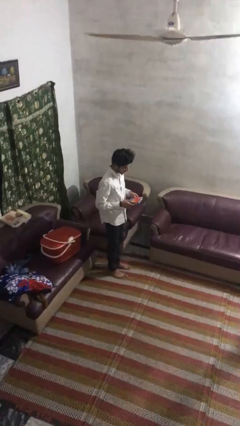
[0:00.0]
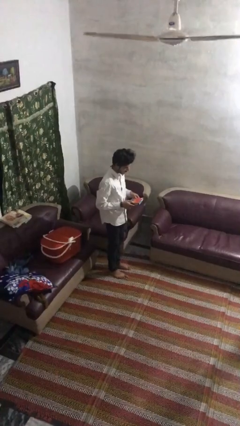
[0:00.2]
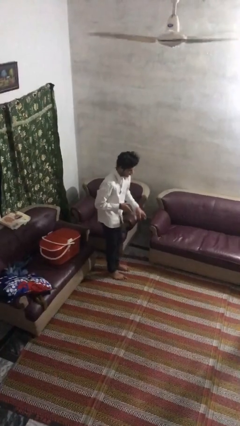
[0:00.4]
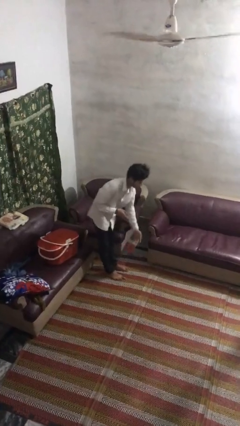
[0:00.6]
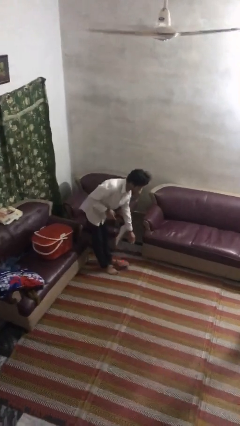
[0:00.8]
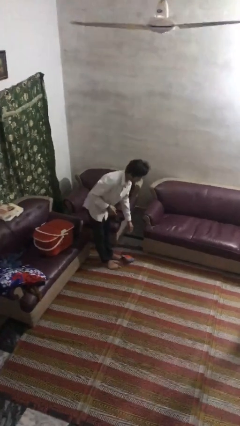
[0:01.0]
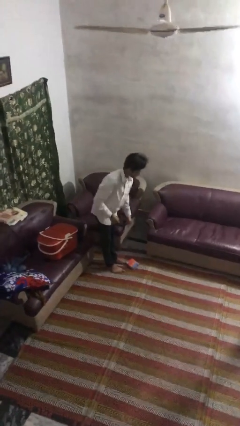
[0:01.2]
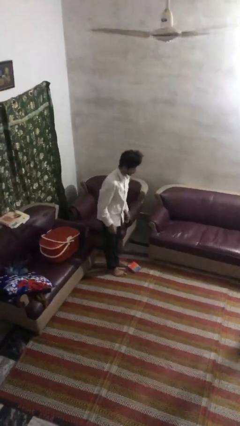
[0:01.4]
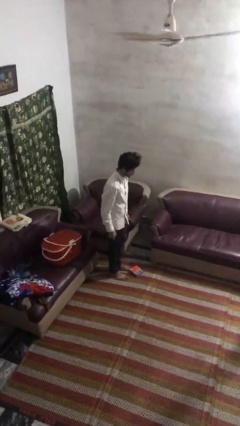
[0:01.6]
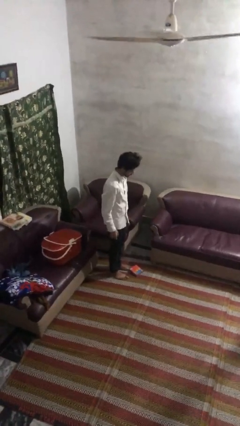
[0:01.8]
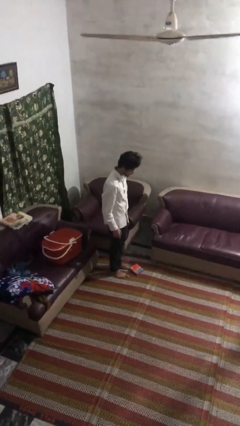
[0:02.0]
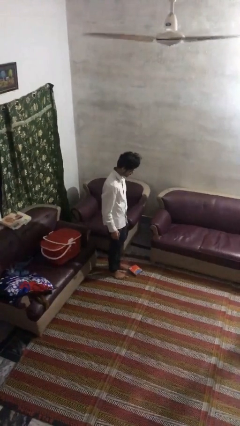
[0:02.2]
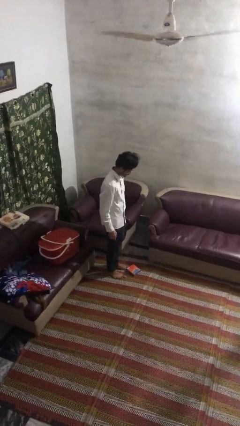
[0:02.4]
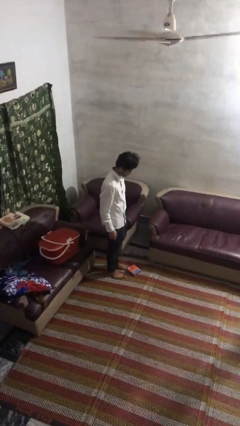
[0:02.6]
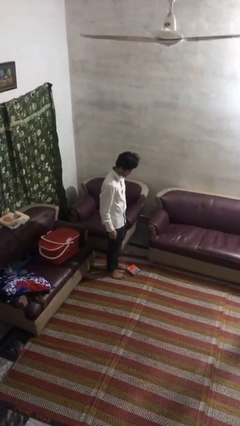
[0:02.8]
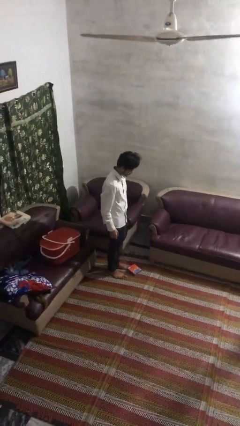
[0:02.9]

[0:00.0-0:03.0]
person drops object

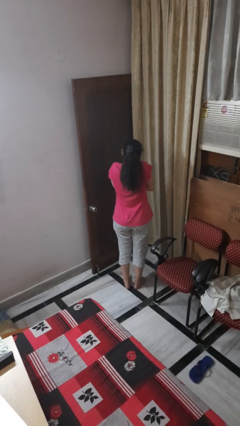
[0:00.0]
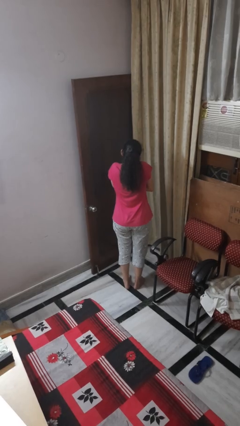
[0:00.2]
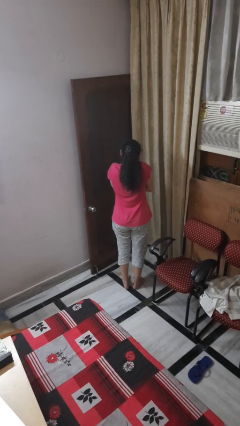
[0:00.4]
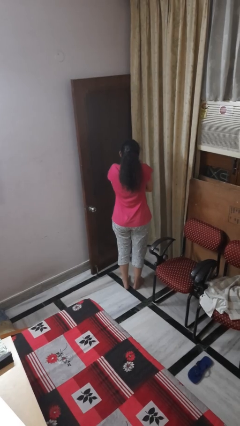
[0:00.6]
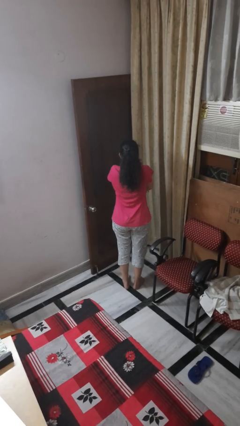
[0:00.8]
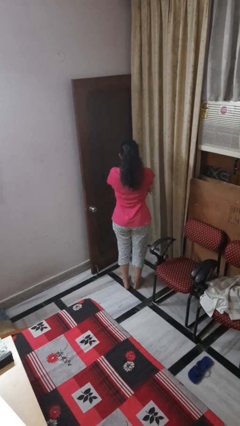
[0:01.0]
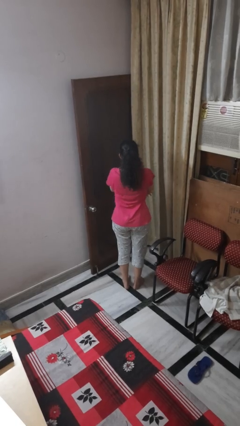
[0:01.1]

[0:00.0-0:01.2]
person shrugs

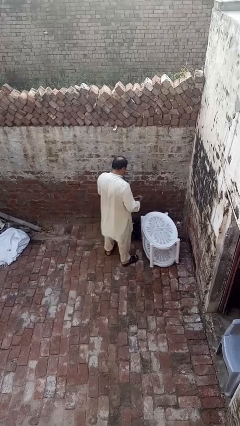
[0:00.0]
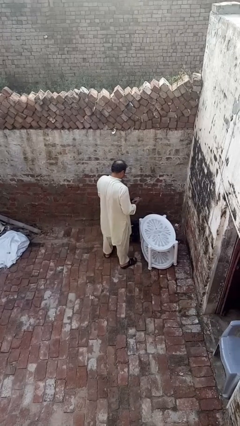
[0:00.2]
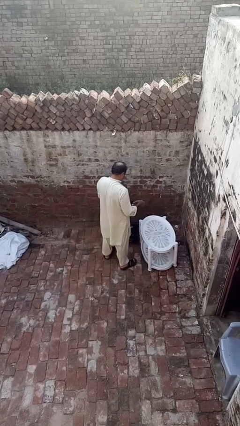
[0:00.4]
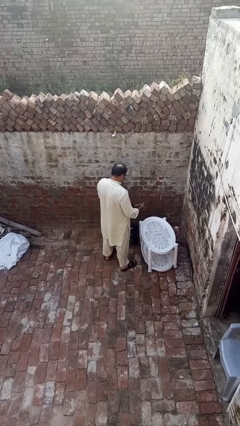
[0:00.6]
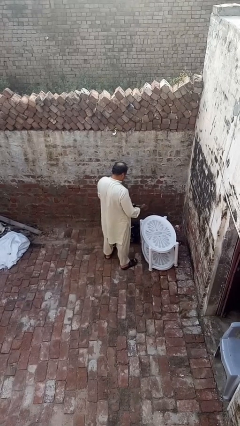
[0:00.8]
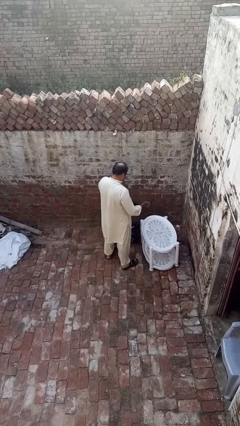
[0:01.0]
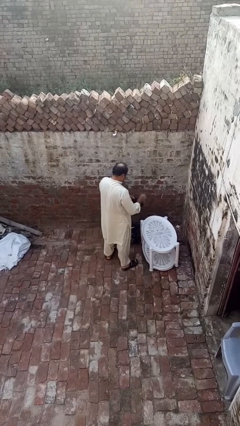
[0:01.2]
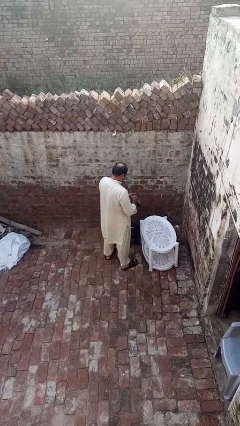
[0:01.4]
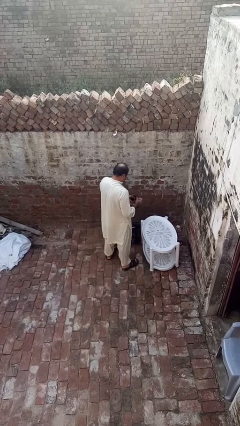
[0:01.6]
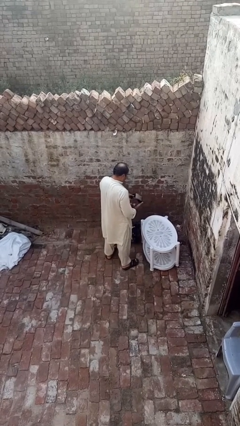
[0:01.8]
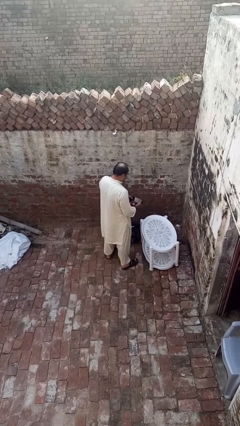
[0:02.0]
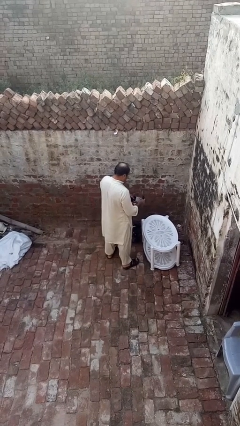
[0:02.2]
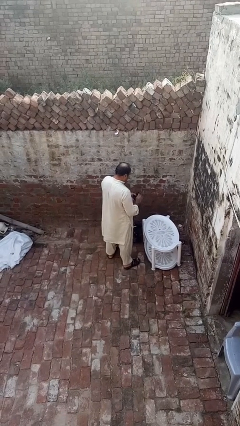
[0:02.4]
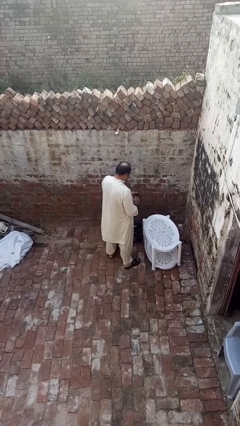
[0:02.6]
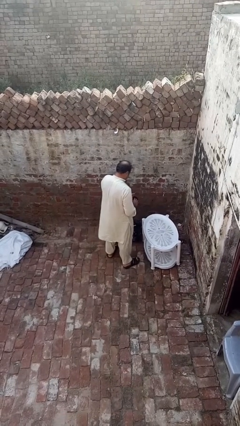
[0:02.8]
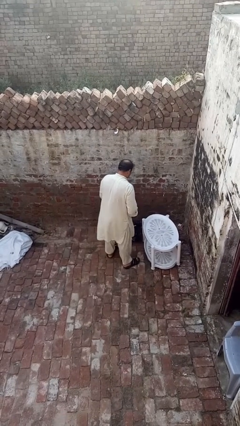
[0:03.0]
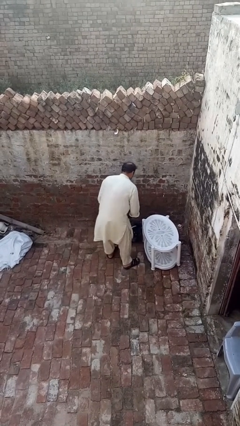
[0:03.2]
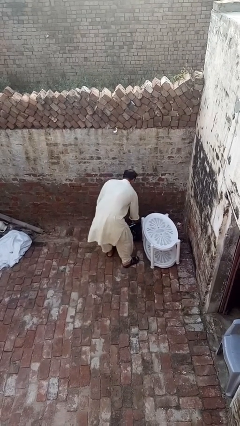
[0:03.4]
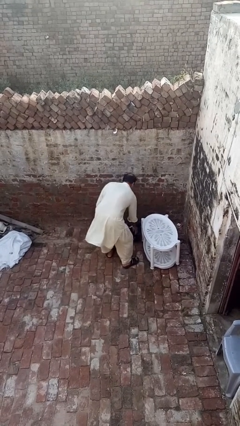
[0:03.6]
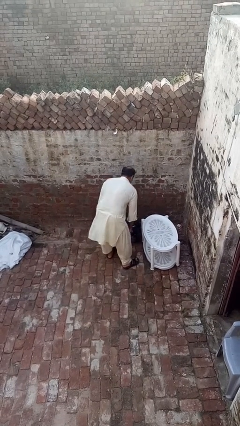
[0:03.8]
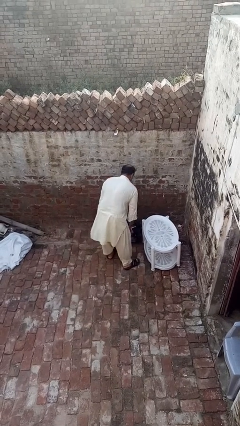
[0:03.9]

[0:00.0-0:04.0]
person folds socks

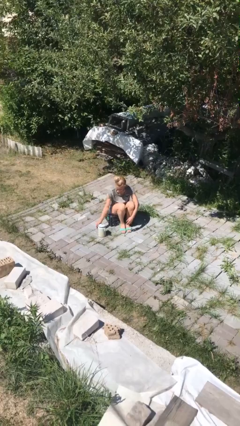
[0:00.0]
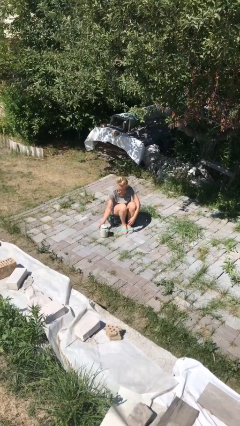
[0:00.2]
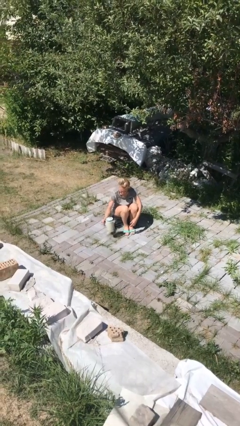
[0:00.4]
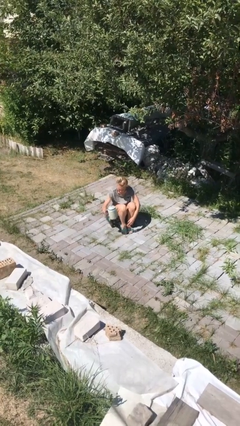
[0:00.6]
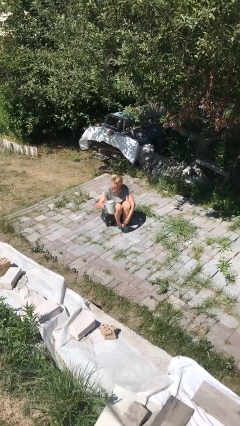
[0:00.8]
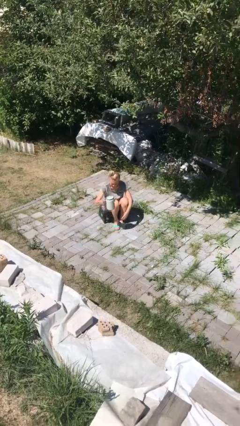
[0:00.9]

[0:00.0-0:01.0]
person picks up object from floor

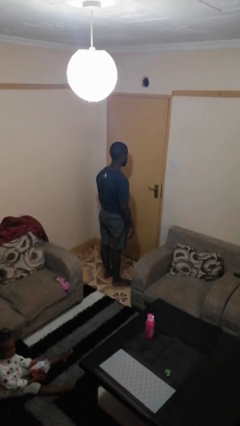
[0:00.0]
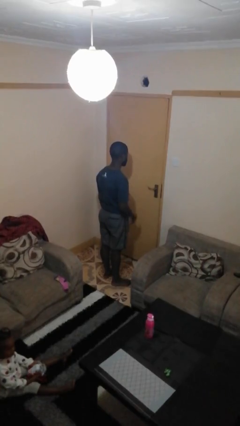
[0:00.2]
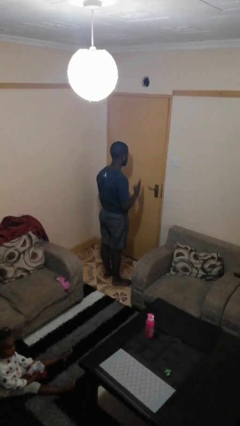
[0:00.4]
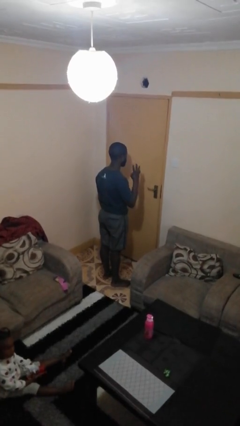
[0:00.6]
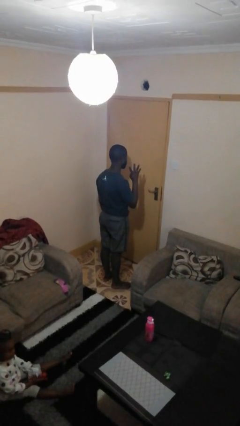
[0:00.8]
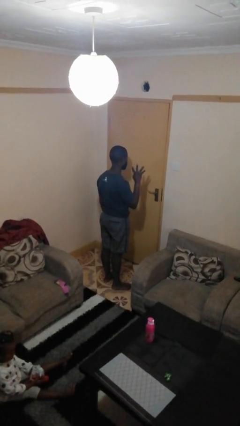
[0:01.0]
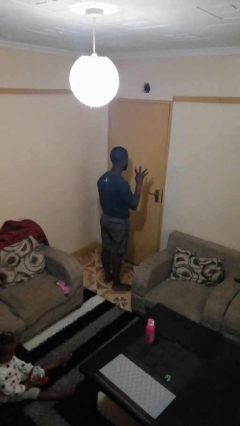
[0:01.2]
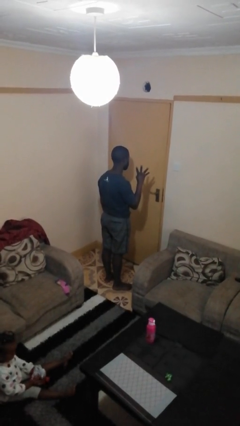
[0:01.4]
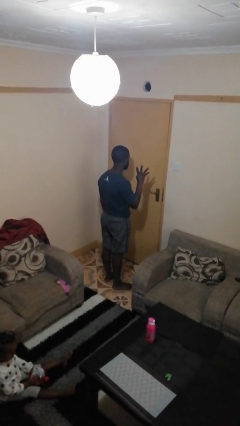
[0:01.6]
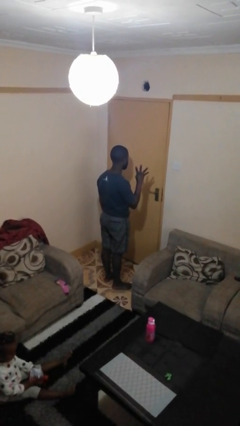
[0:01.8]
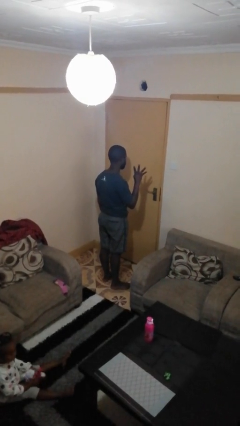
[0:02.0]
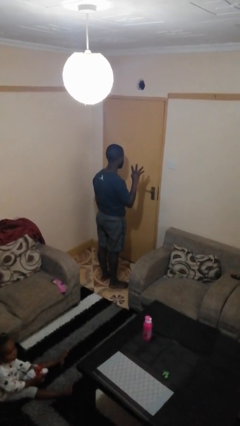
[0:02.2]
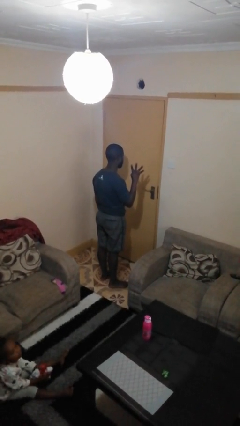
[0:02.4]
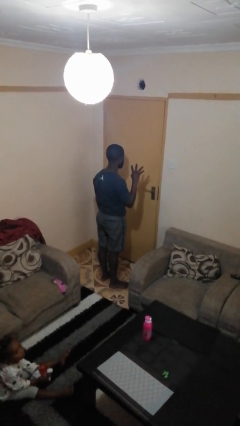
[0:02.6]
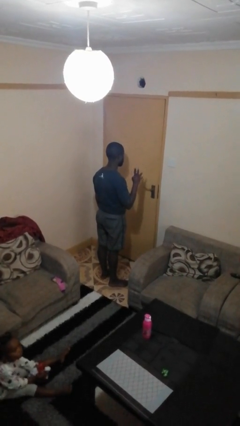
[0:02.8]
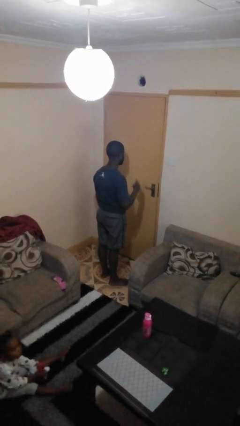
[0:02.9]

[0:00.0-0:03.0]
person gestures number four

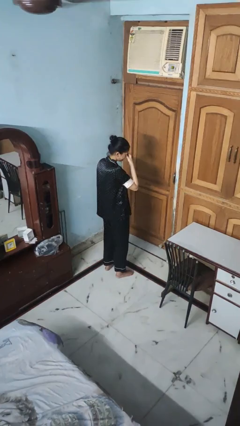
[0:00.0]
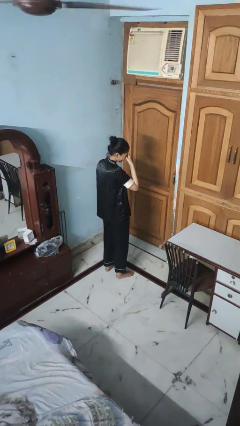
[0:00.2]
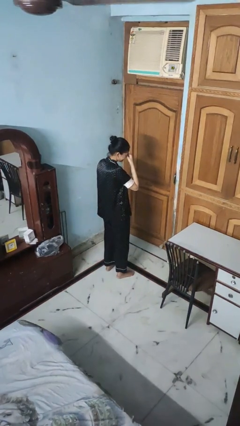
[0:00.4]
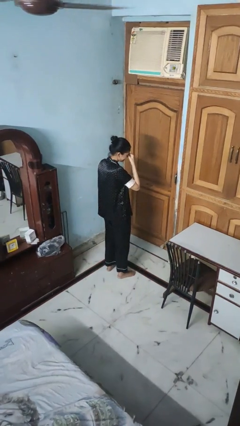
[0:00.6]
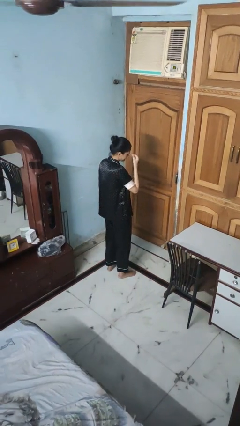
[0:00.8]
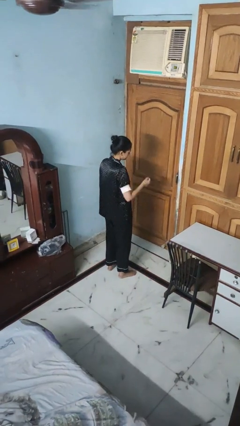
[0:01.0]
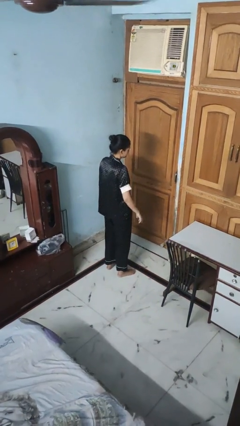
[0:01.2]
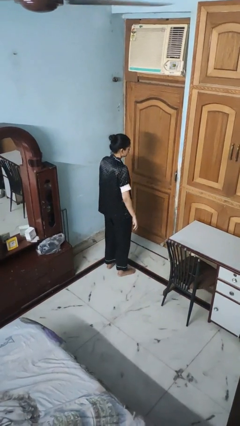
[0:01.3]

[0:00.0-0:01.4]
person rubs eyes

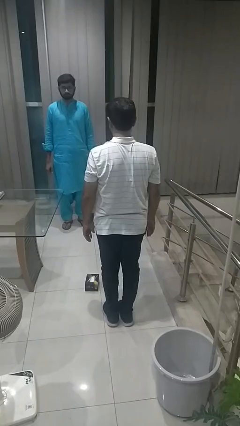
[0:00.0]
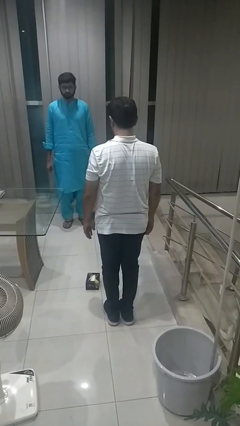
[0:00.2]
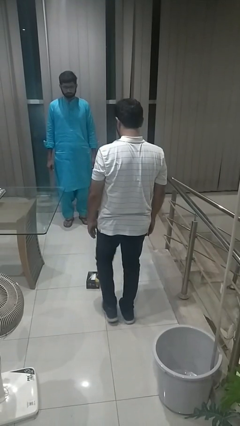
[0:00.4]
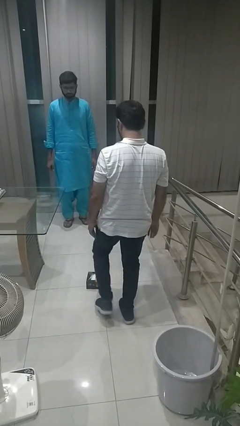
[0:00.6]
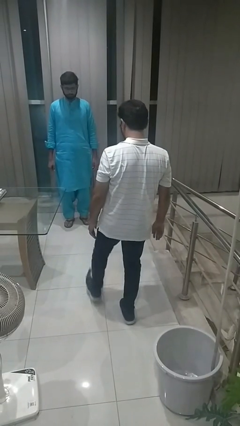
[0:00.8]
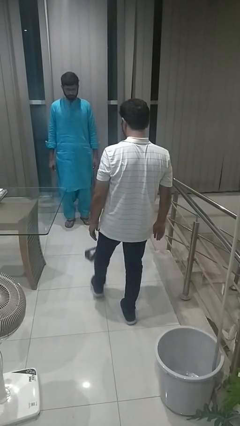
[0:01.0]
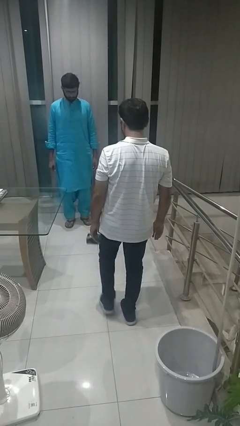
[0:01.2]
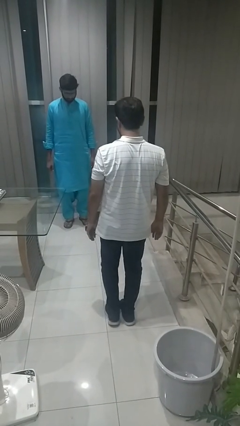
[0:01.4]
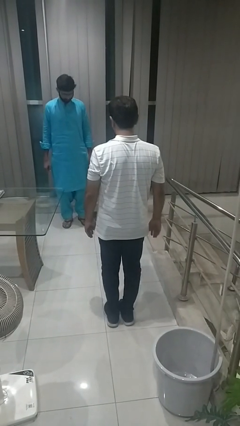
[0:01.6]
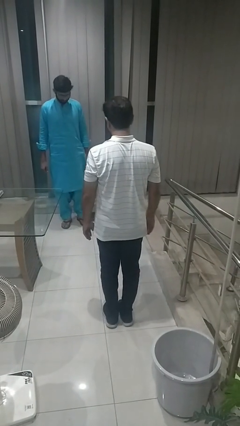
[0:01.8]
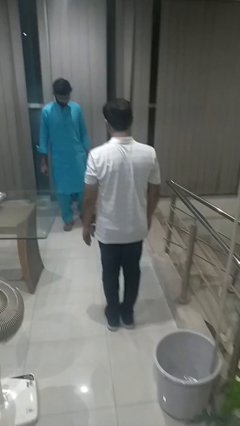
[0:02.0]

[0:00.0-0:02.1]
person kicks object to person

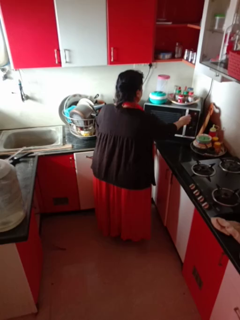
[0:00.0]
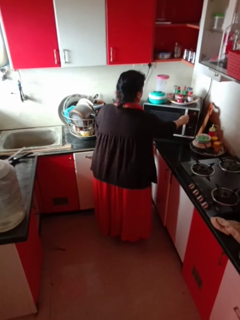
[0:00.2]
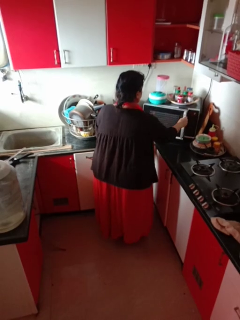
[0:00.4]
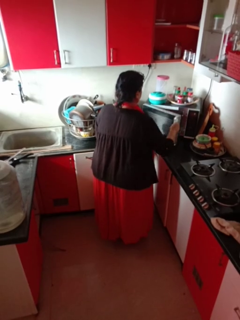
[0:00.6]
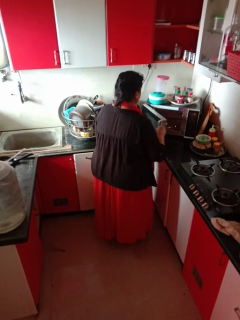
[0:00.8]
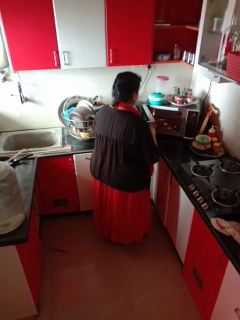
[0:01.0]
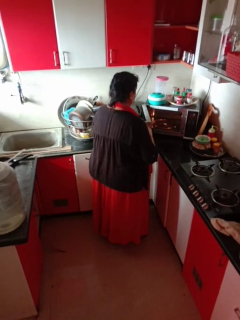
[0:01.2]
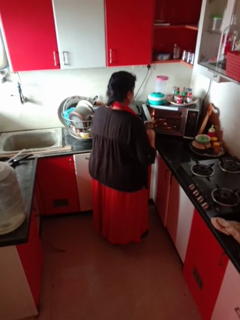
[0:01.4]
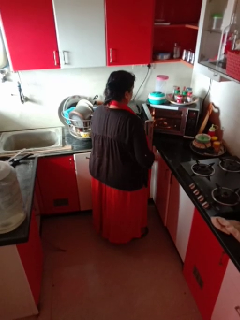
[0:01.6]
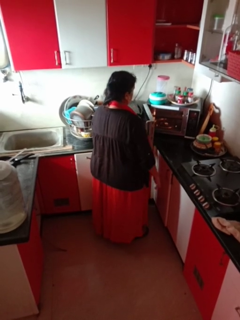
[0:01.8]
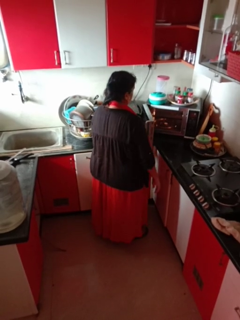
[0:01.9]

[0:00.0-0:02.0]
person opens microwave
